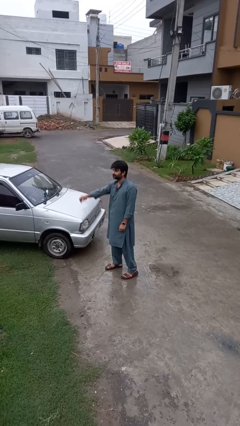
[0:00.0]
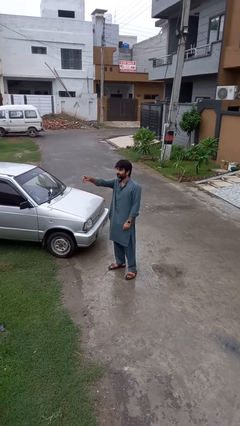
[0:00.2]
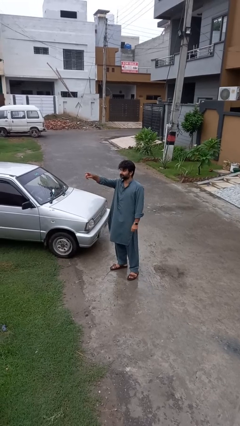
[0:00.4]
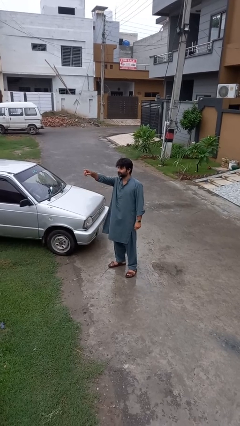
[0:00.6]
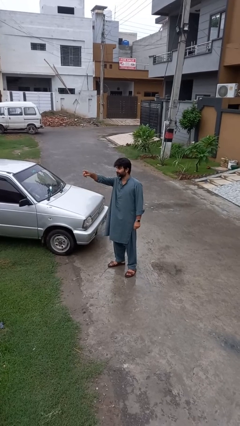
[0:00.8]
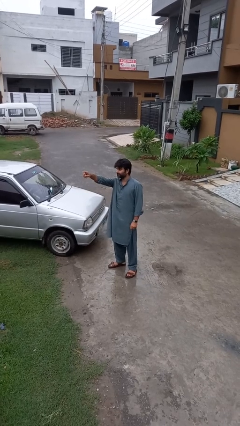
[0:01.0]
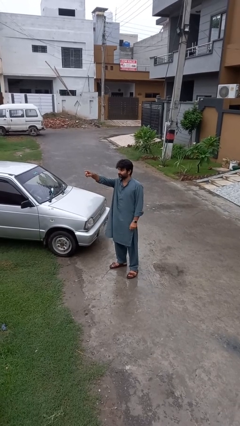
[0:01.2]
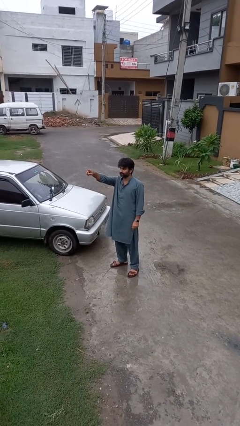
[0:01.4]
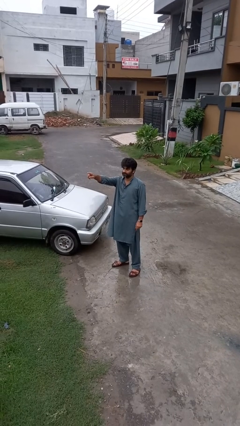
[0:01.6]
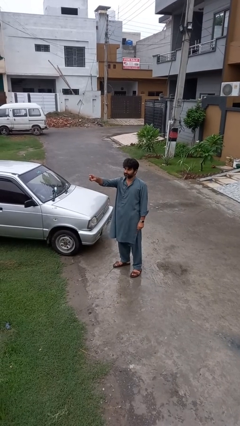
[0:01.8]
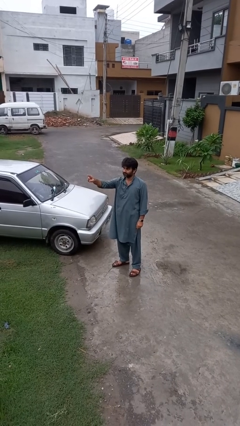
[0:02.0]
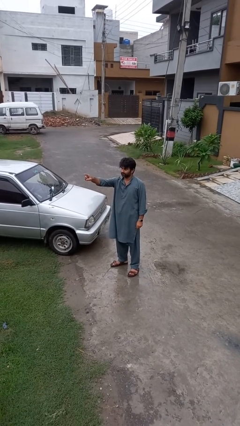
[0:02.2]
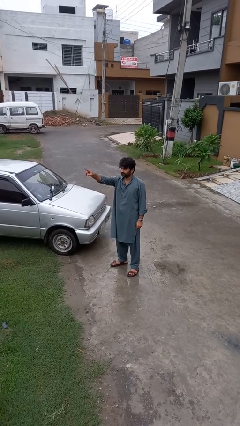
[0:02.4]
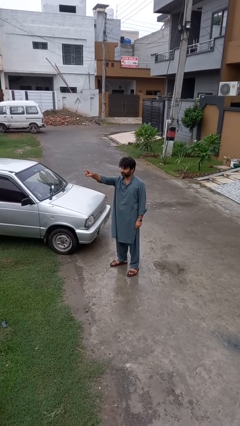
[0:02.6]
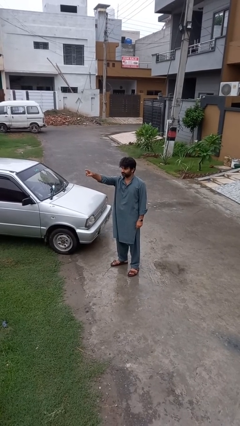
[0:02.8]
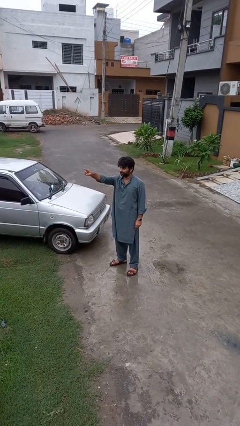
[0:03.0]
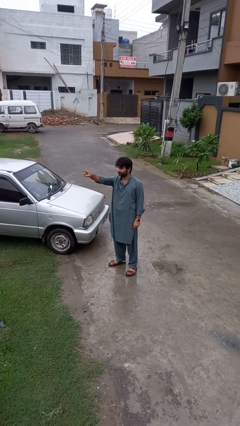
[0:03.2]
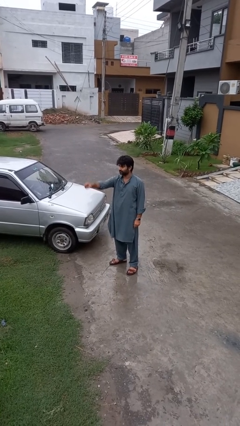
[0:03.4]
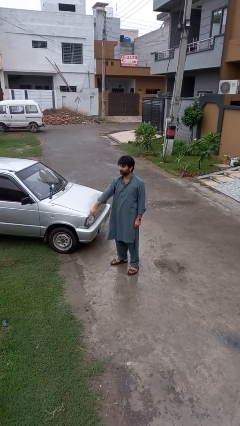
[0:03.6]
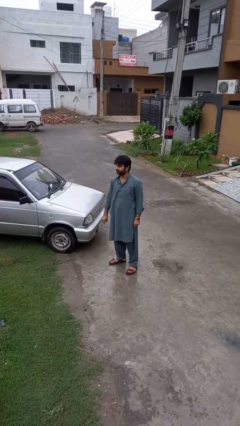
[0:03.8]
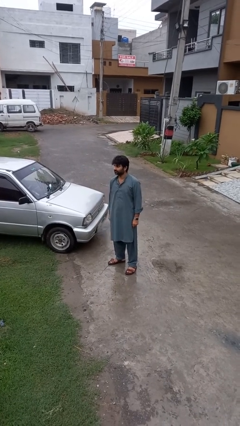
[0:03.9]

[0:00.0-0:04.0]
person points at person

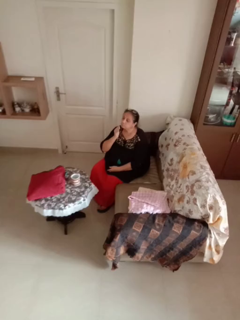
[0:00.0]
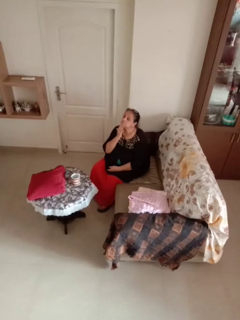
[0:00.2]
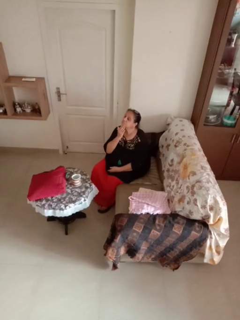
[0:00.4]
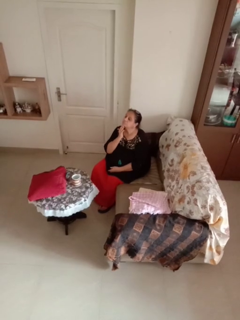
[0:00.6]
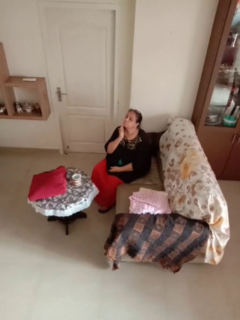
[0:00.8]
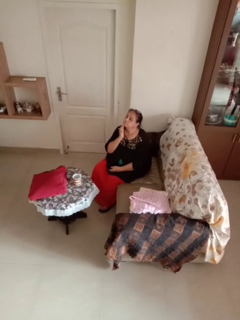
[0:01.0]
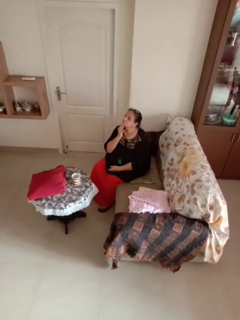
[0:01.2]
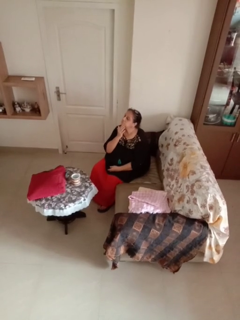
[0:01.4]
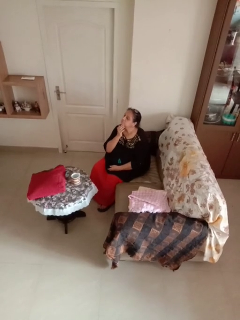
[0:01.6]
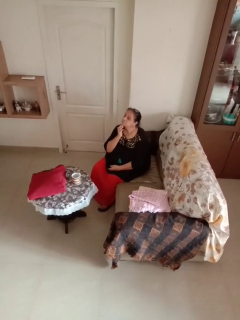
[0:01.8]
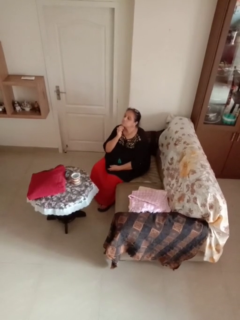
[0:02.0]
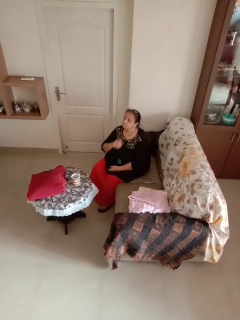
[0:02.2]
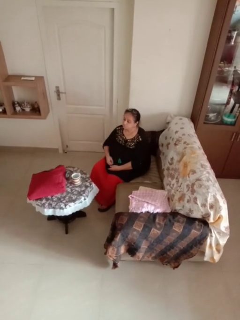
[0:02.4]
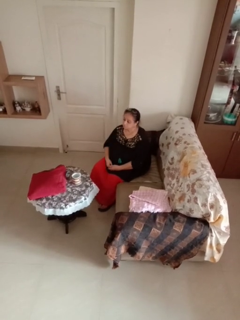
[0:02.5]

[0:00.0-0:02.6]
person strokes chin

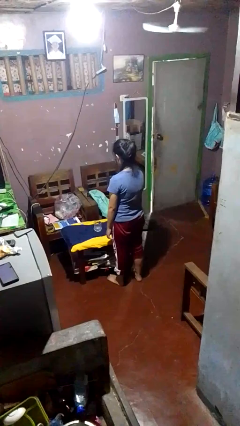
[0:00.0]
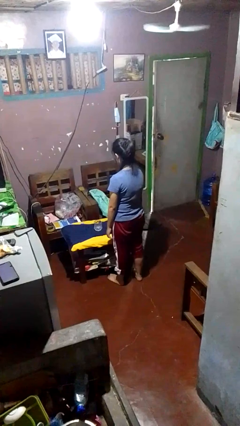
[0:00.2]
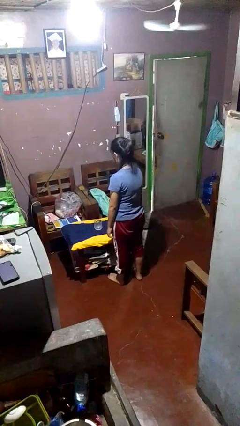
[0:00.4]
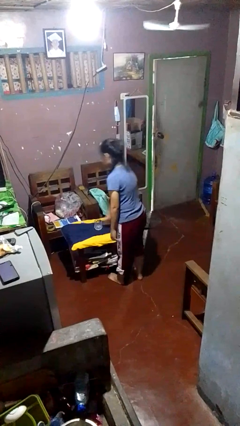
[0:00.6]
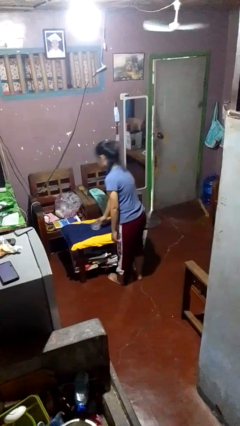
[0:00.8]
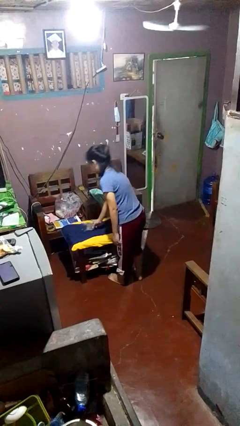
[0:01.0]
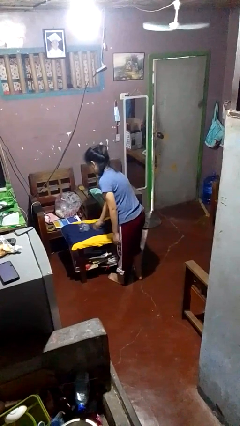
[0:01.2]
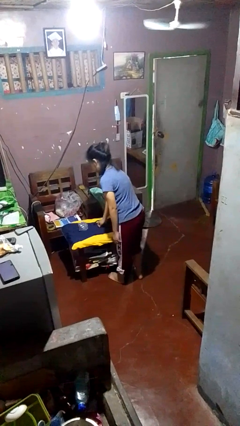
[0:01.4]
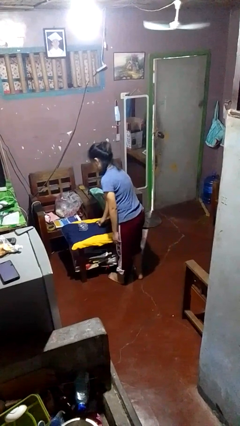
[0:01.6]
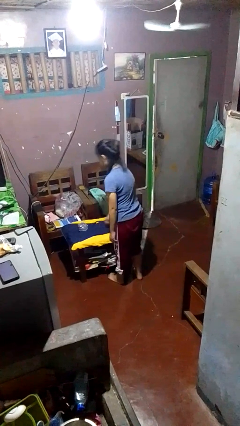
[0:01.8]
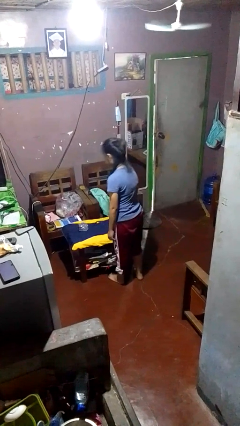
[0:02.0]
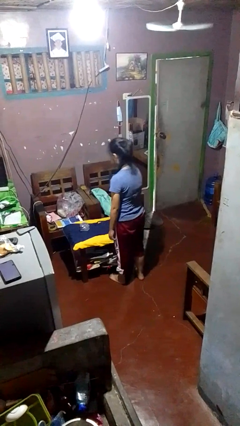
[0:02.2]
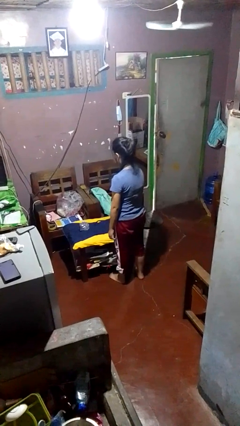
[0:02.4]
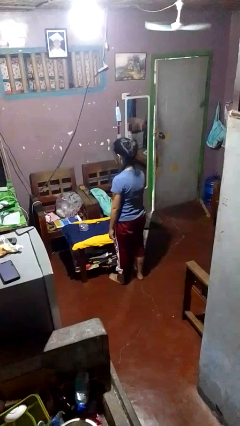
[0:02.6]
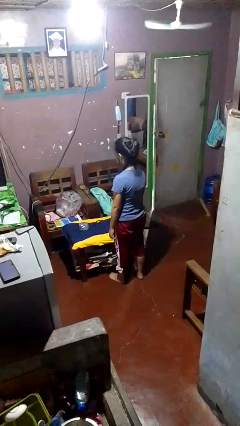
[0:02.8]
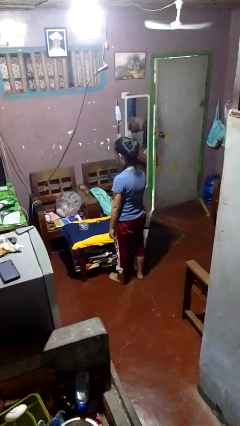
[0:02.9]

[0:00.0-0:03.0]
person knocks over glass

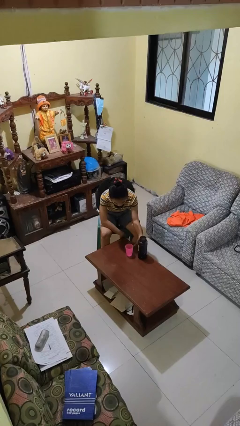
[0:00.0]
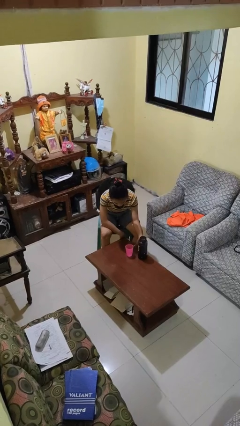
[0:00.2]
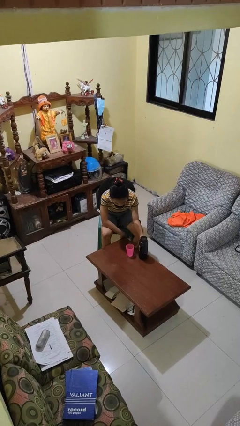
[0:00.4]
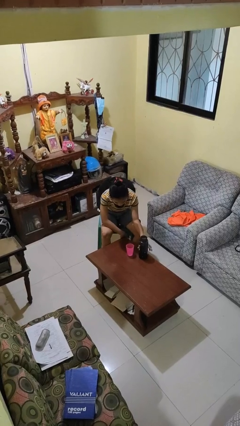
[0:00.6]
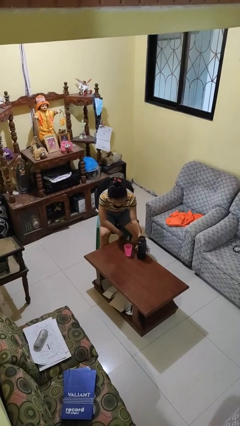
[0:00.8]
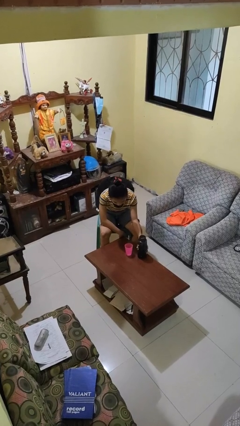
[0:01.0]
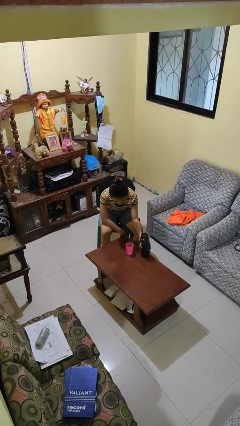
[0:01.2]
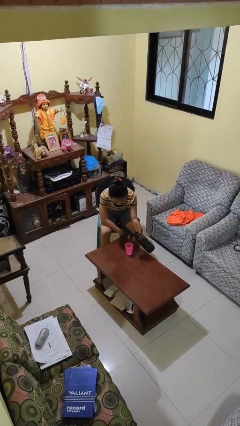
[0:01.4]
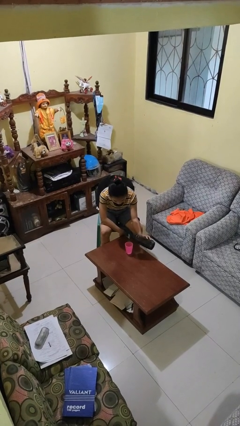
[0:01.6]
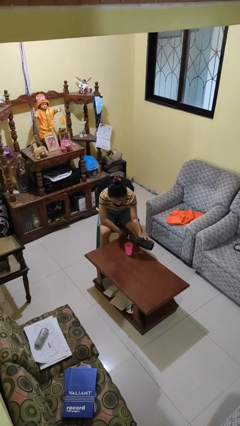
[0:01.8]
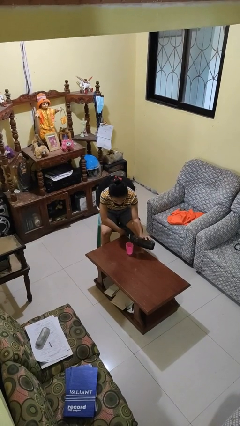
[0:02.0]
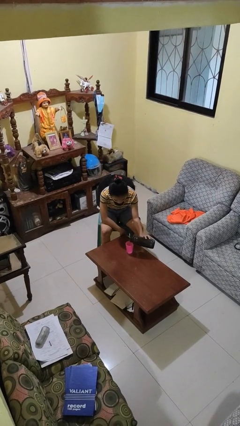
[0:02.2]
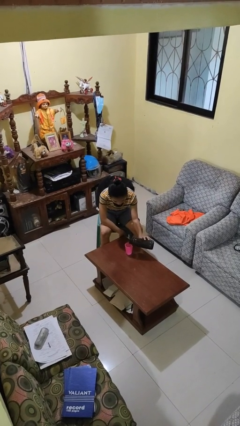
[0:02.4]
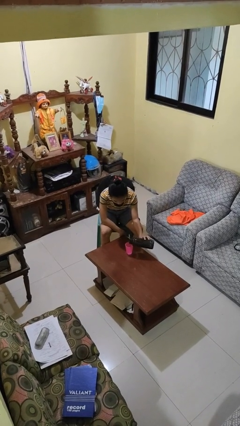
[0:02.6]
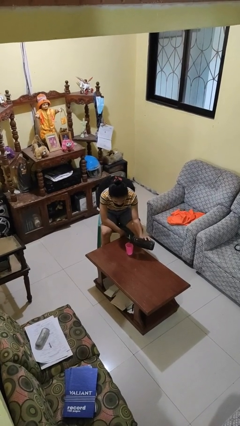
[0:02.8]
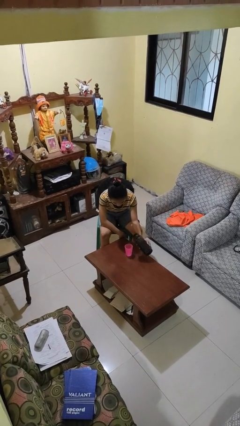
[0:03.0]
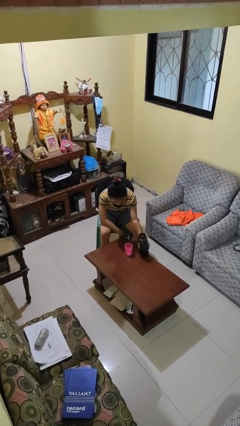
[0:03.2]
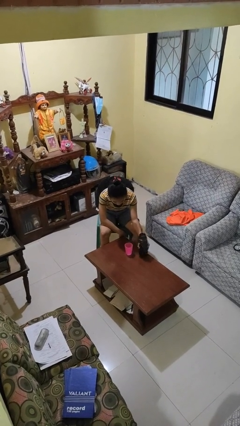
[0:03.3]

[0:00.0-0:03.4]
person pours liquid into cup

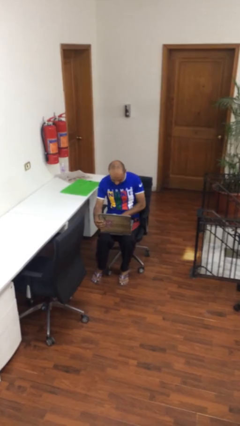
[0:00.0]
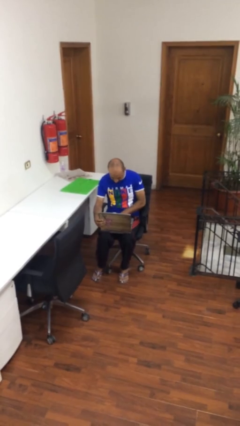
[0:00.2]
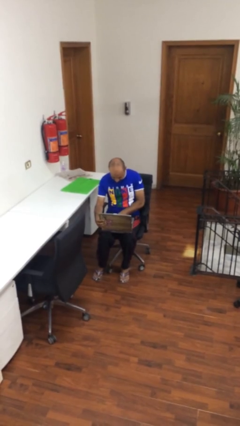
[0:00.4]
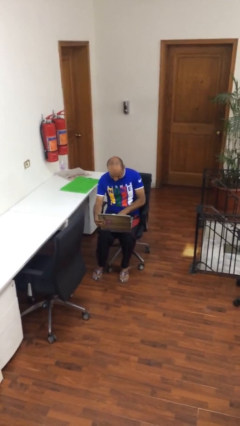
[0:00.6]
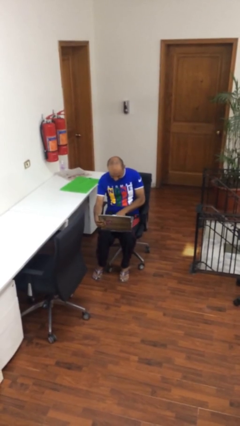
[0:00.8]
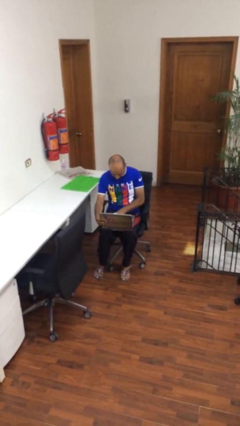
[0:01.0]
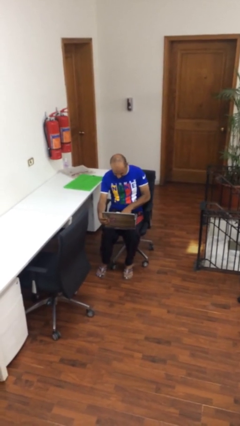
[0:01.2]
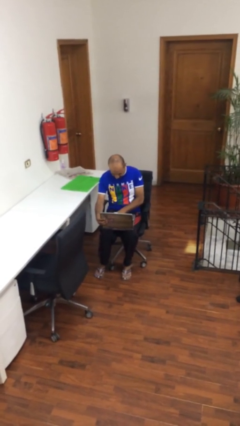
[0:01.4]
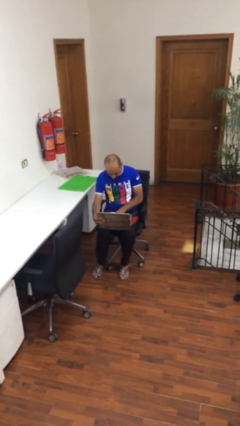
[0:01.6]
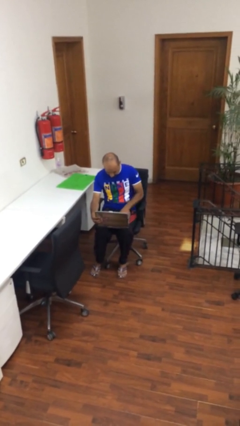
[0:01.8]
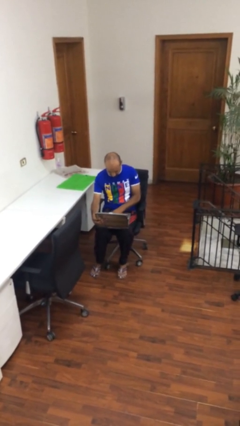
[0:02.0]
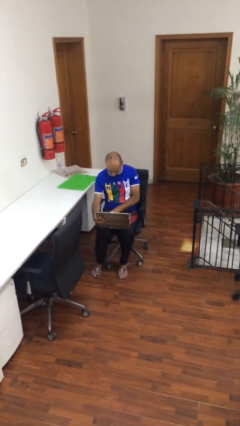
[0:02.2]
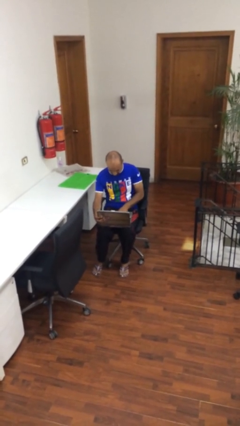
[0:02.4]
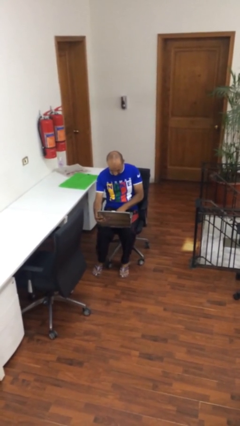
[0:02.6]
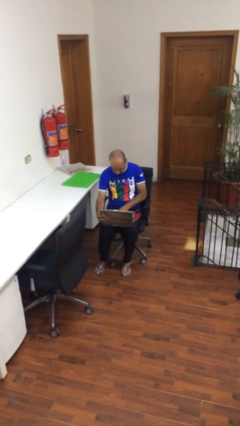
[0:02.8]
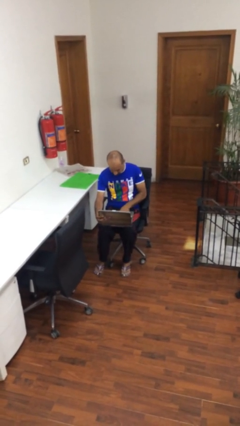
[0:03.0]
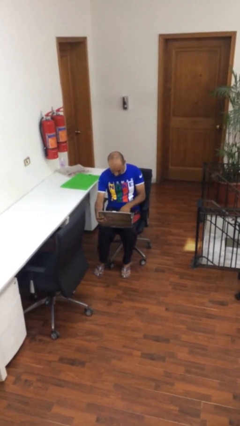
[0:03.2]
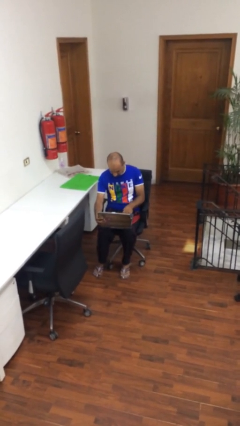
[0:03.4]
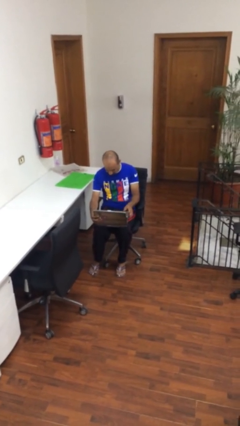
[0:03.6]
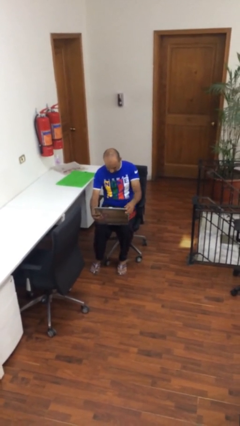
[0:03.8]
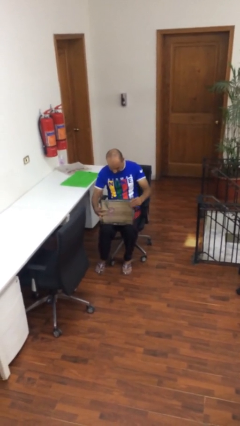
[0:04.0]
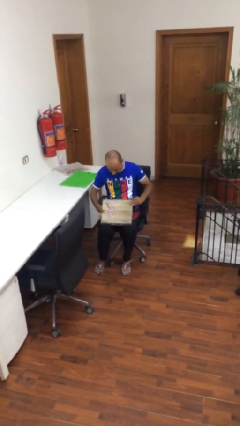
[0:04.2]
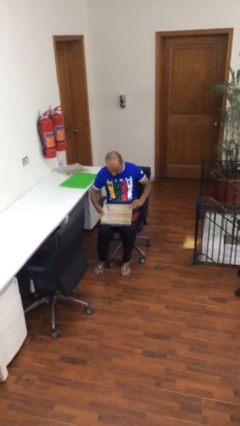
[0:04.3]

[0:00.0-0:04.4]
person interacts with laptop

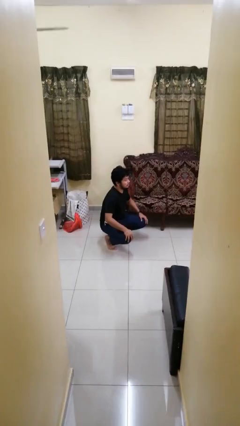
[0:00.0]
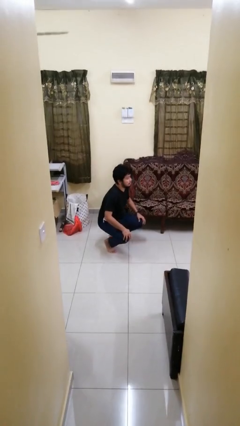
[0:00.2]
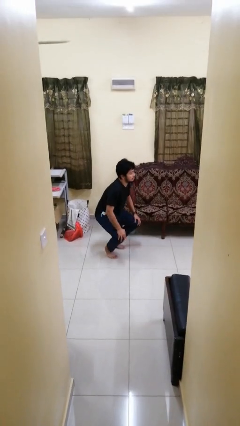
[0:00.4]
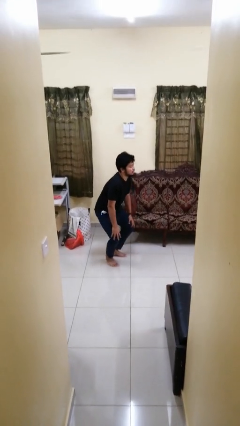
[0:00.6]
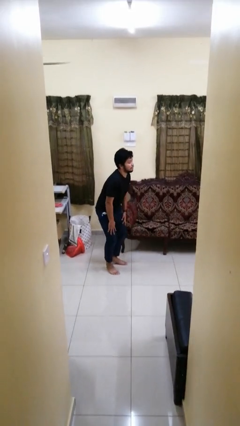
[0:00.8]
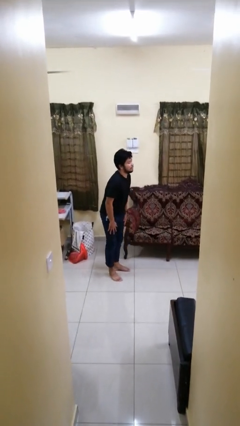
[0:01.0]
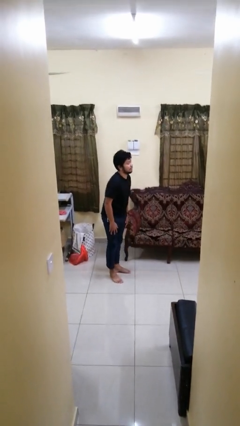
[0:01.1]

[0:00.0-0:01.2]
person stands up
